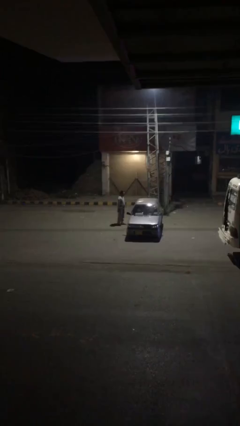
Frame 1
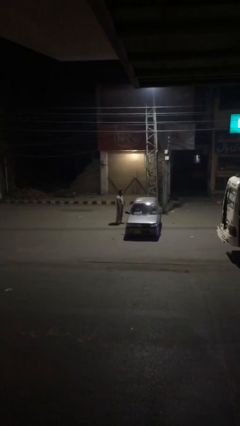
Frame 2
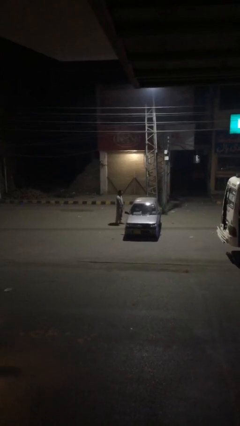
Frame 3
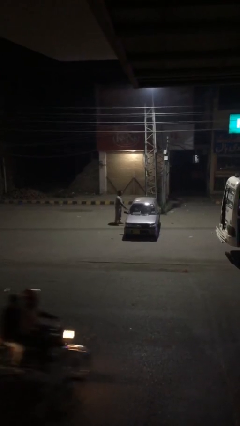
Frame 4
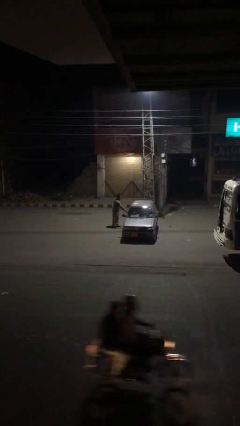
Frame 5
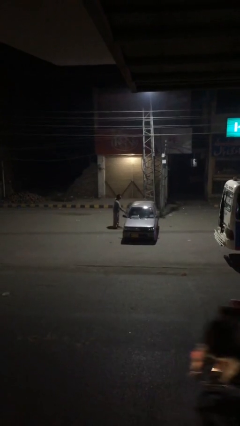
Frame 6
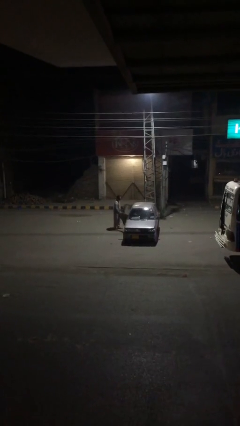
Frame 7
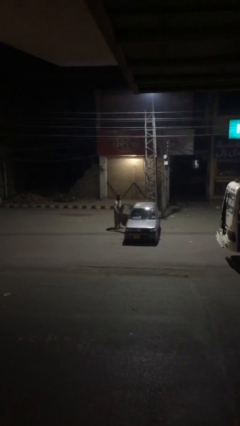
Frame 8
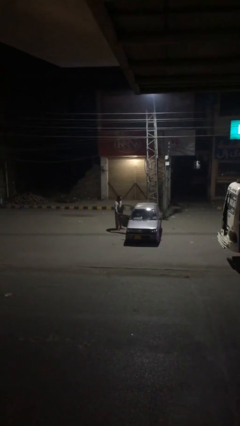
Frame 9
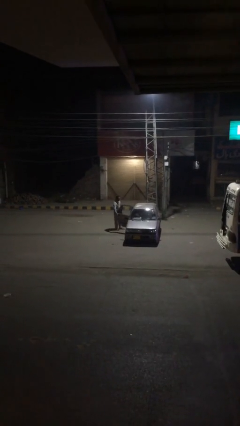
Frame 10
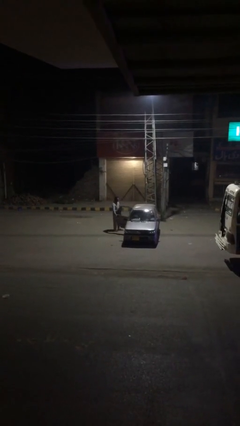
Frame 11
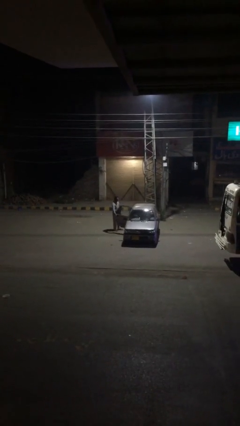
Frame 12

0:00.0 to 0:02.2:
person opens car door

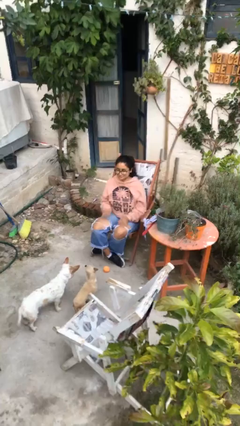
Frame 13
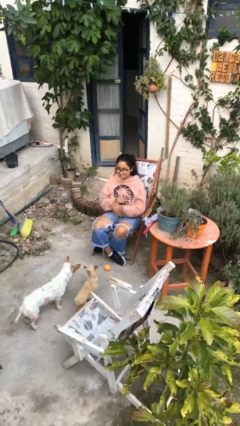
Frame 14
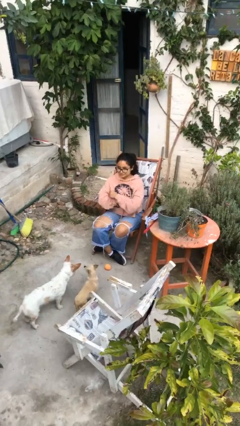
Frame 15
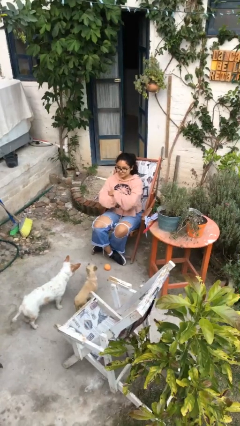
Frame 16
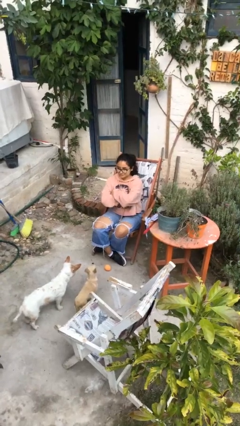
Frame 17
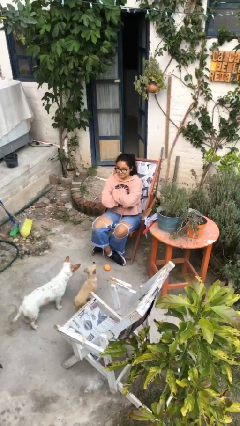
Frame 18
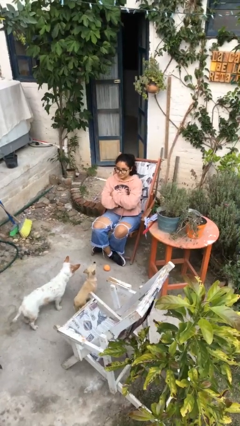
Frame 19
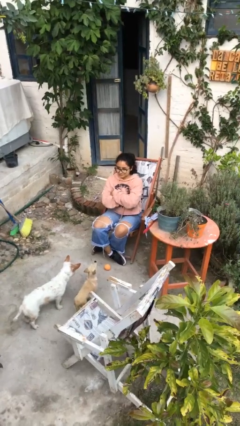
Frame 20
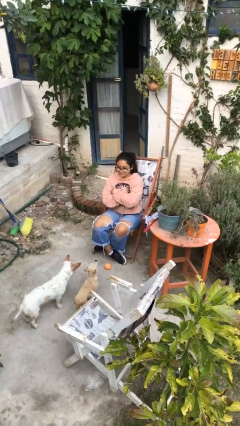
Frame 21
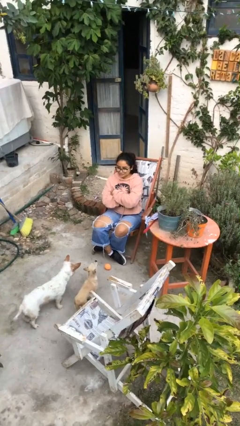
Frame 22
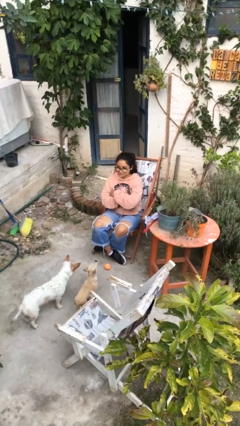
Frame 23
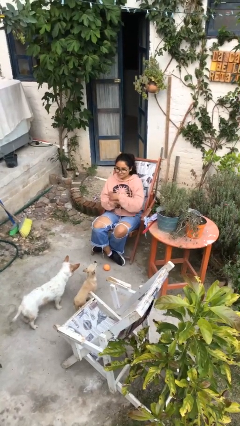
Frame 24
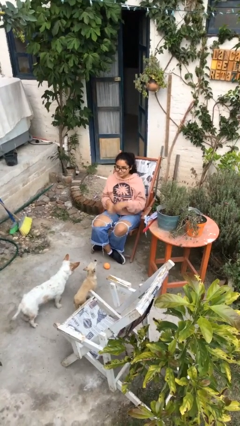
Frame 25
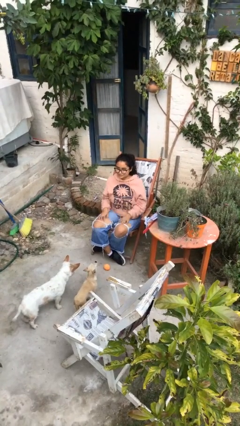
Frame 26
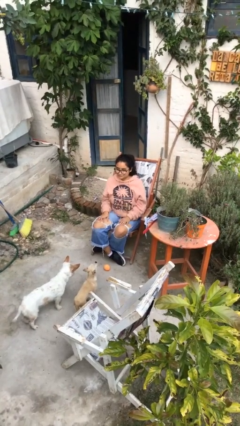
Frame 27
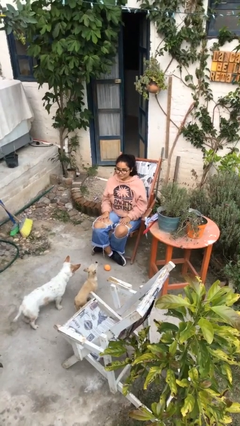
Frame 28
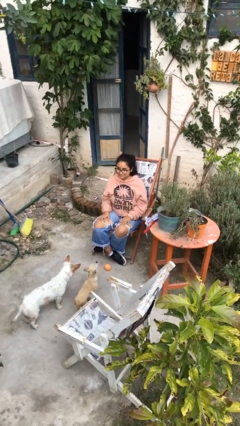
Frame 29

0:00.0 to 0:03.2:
person crosses arms

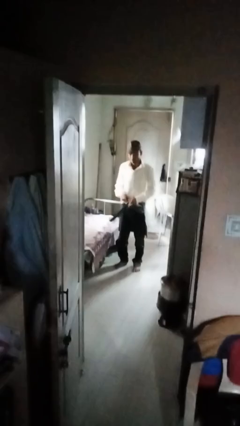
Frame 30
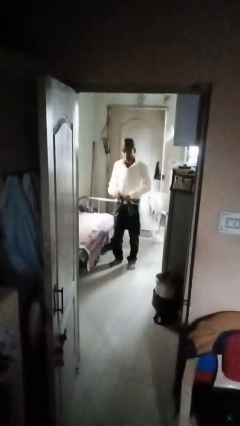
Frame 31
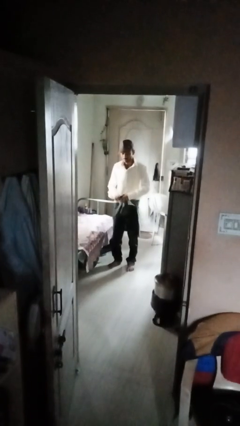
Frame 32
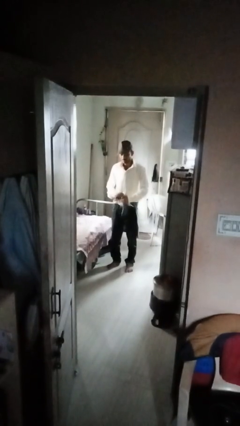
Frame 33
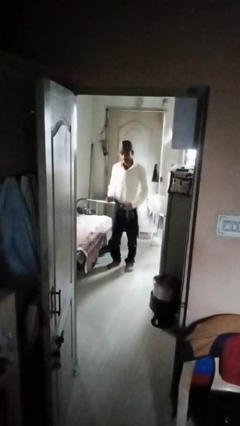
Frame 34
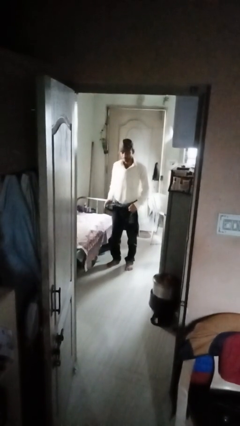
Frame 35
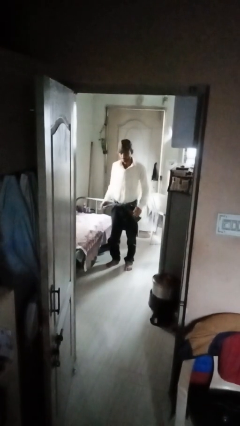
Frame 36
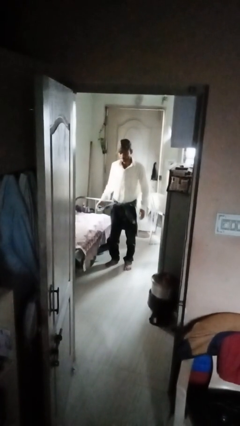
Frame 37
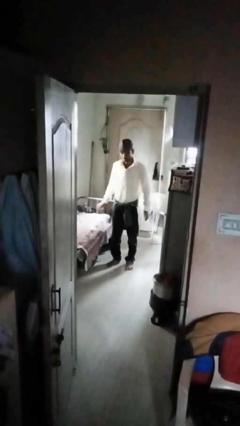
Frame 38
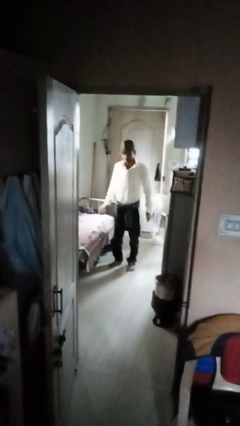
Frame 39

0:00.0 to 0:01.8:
person ties jacket around waist

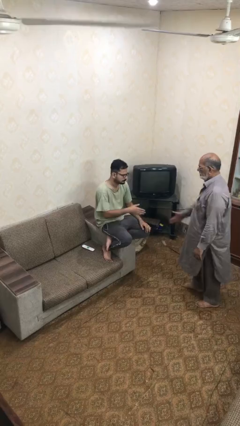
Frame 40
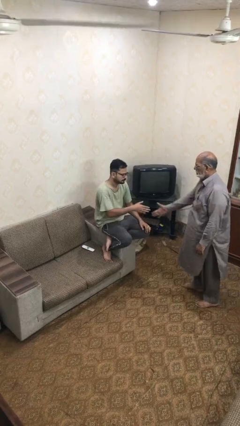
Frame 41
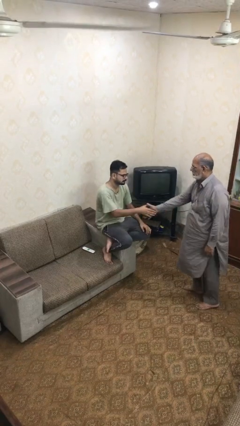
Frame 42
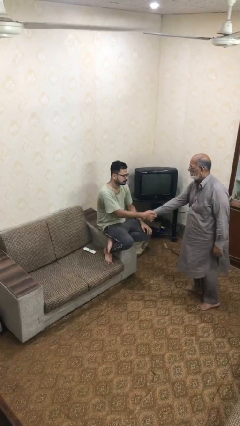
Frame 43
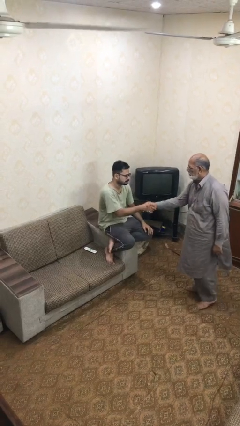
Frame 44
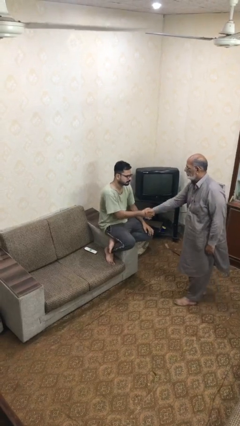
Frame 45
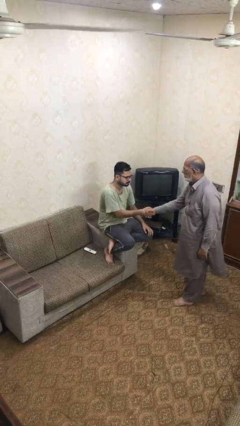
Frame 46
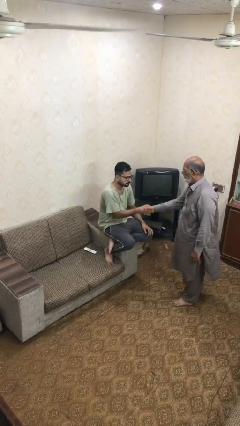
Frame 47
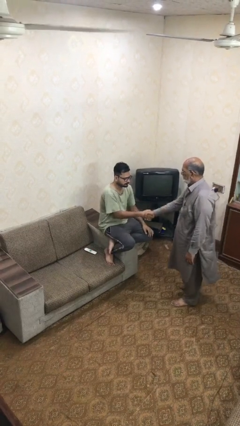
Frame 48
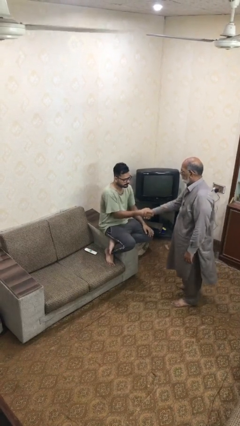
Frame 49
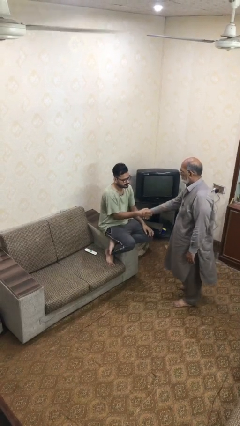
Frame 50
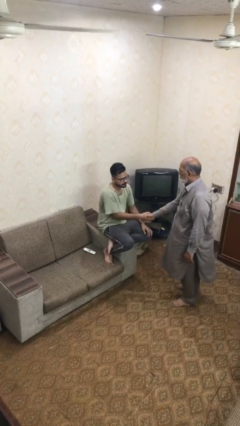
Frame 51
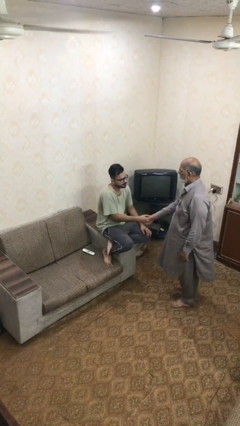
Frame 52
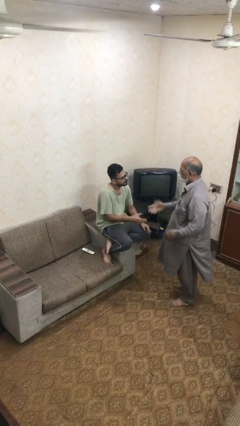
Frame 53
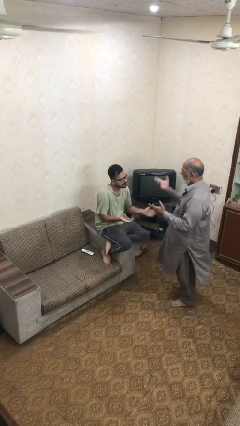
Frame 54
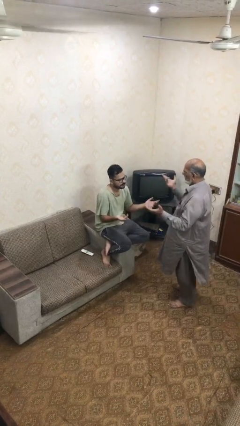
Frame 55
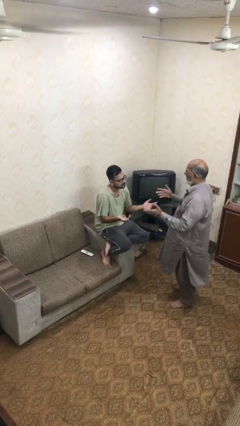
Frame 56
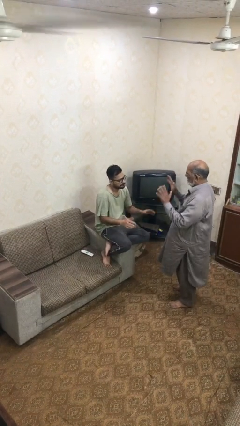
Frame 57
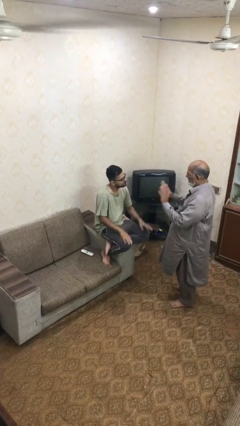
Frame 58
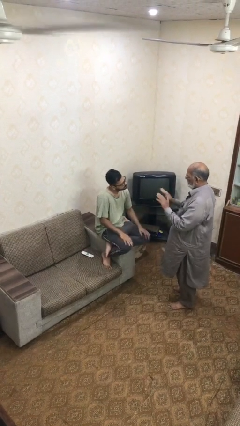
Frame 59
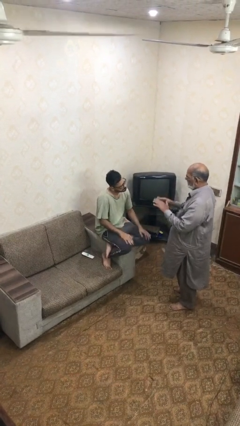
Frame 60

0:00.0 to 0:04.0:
person shakes hand

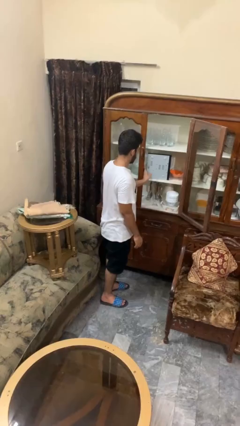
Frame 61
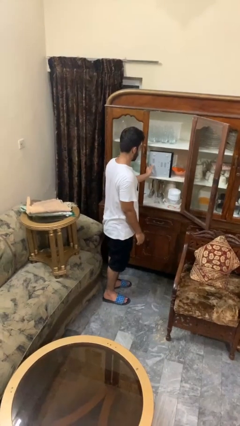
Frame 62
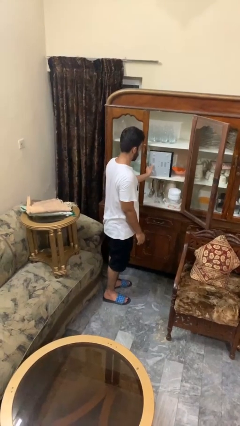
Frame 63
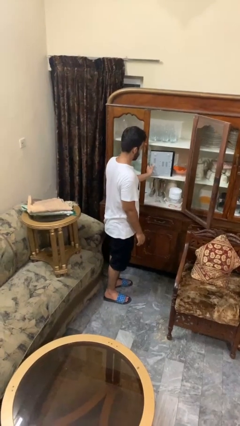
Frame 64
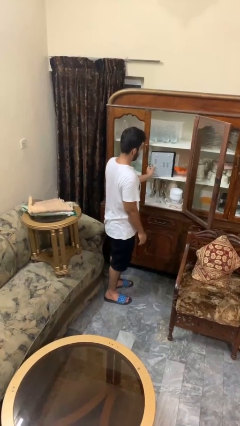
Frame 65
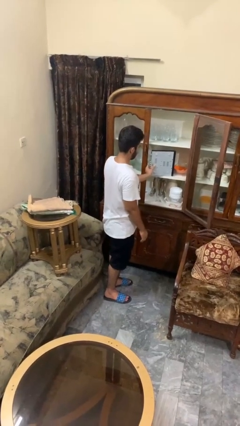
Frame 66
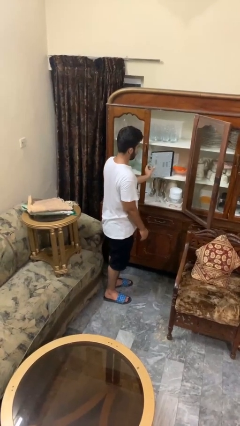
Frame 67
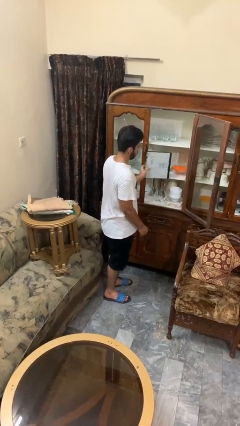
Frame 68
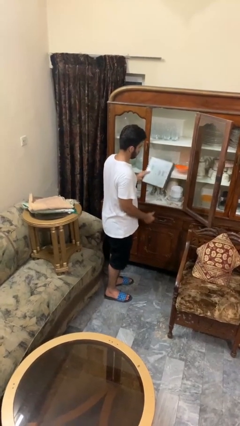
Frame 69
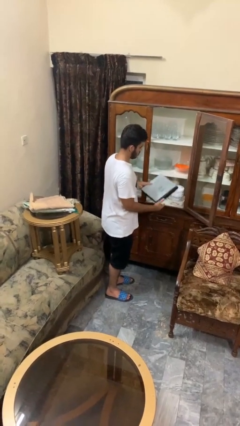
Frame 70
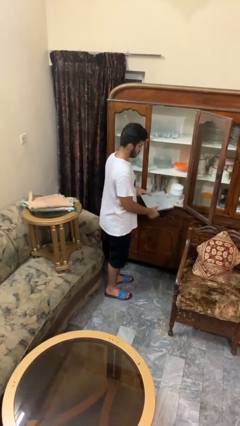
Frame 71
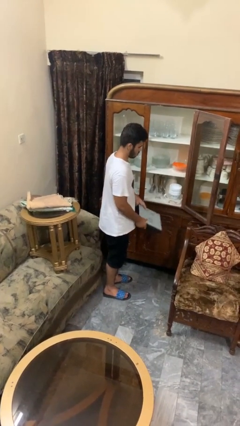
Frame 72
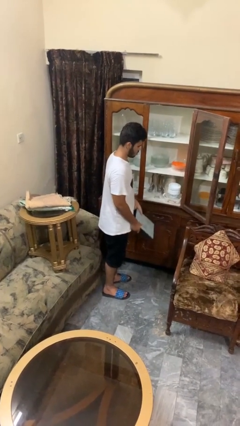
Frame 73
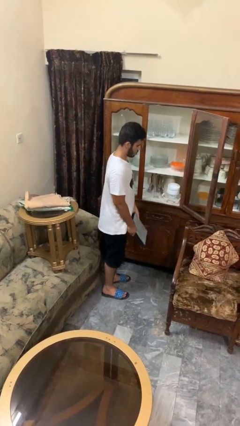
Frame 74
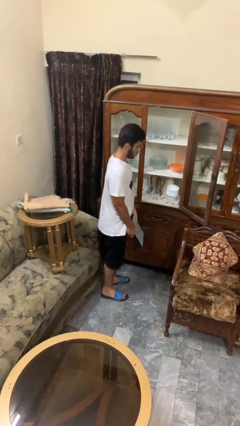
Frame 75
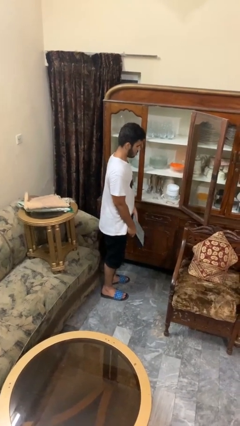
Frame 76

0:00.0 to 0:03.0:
person picks up object from cabinet

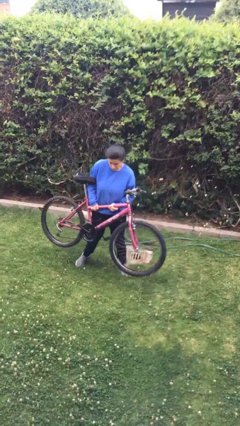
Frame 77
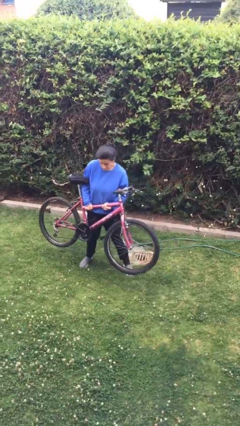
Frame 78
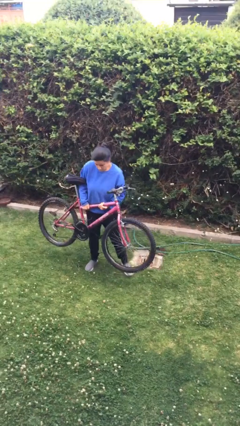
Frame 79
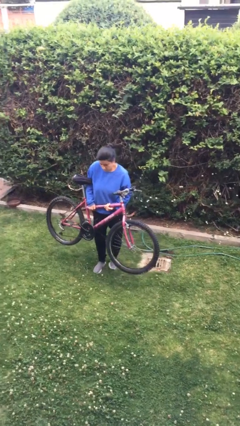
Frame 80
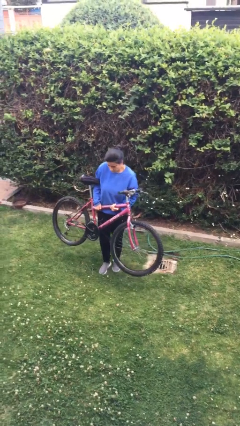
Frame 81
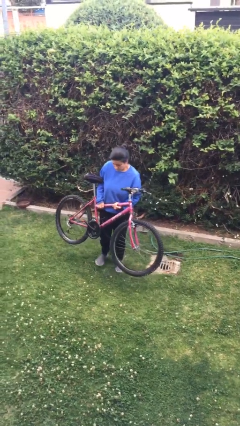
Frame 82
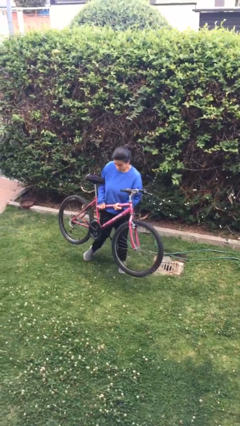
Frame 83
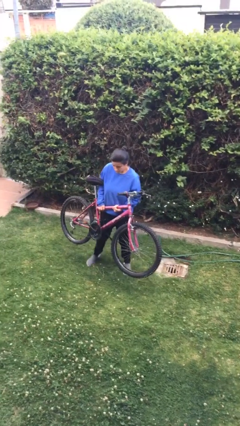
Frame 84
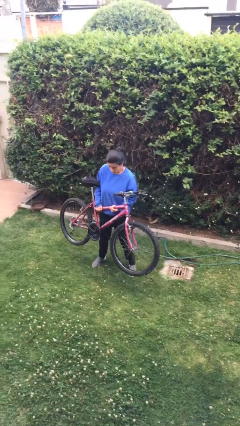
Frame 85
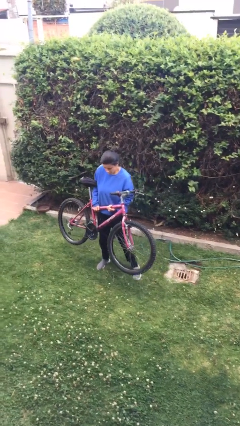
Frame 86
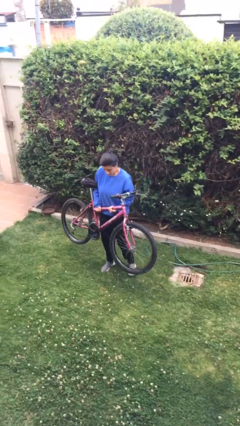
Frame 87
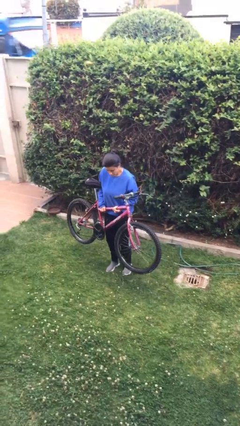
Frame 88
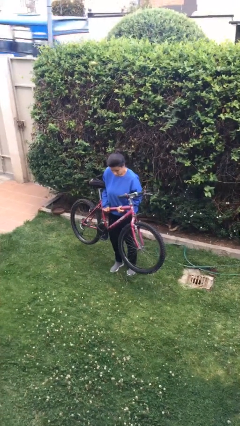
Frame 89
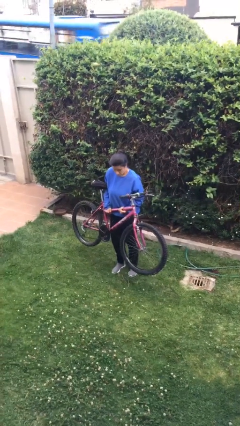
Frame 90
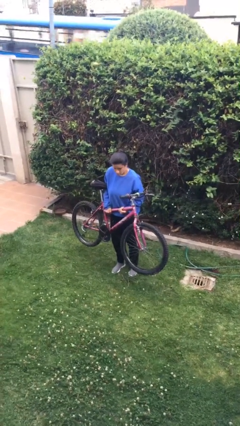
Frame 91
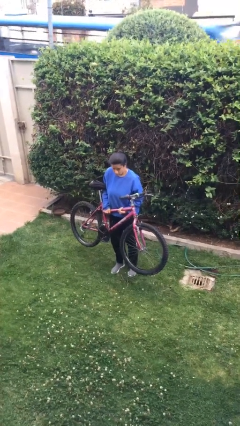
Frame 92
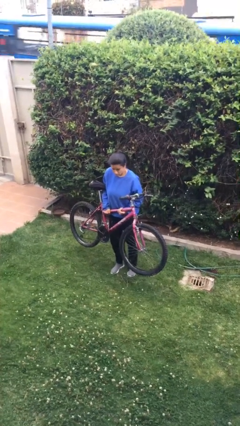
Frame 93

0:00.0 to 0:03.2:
person carries bicycle
